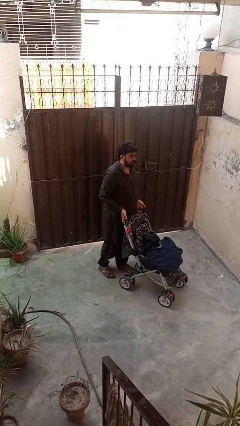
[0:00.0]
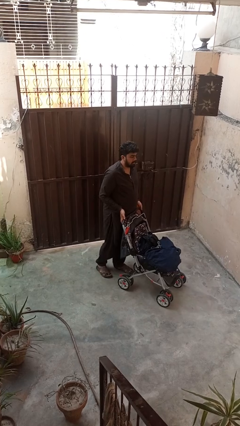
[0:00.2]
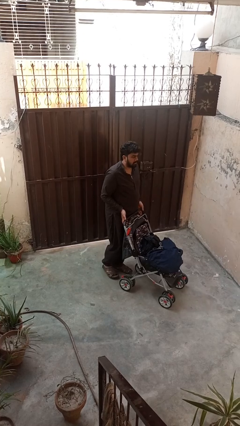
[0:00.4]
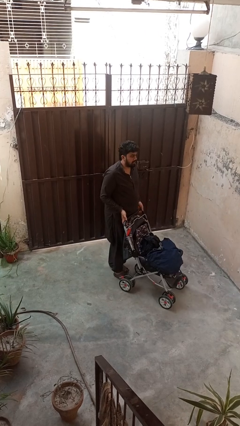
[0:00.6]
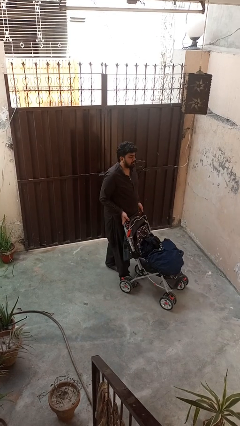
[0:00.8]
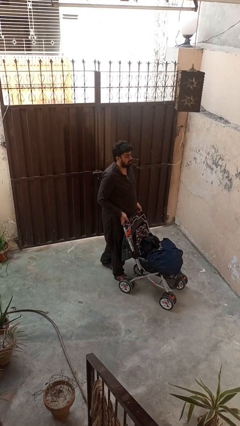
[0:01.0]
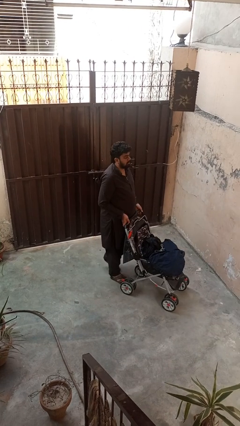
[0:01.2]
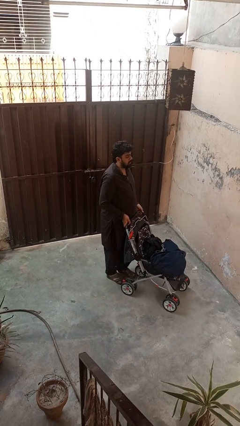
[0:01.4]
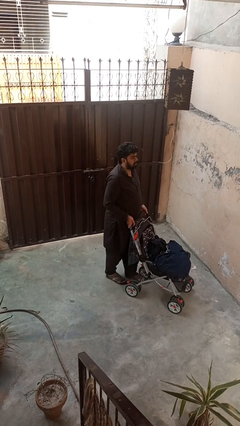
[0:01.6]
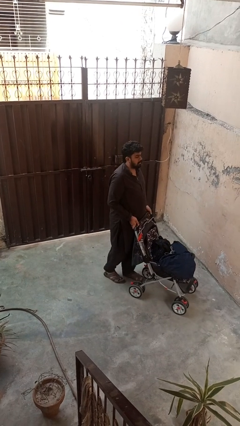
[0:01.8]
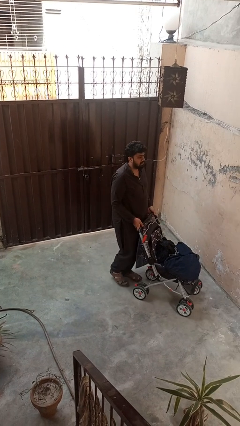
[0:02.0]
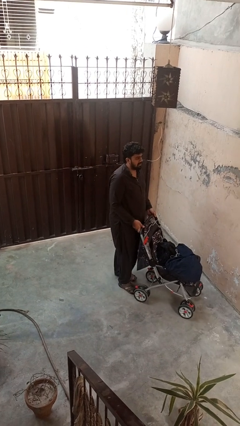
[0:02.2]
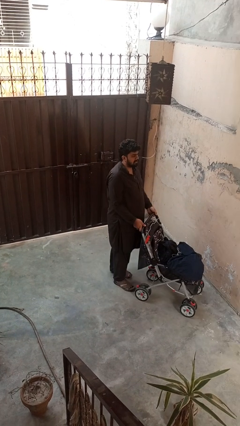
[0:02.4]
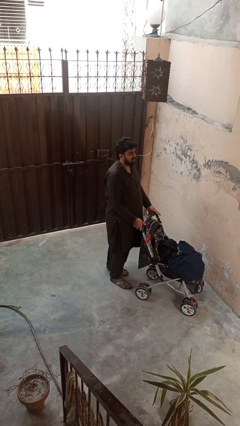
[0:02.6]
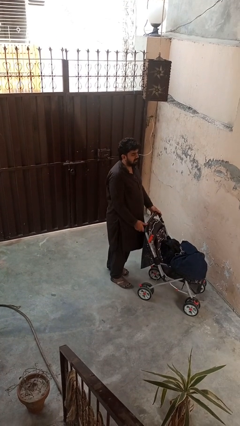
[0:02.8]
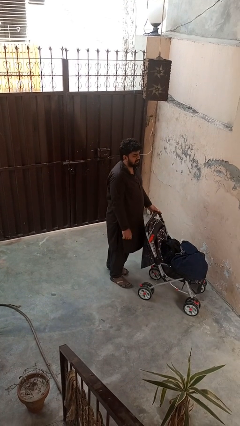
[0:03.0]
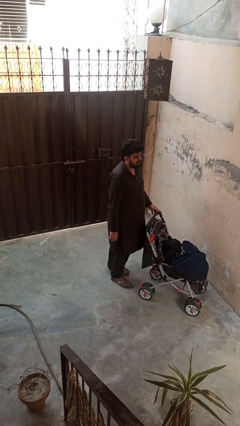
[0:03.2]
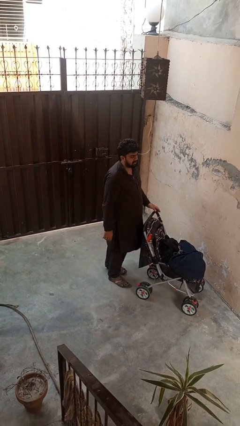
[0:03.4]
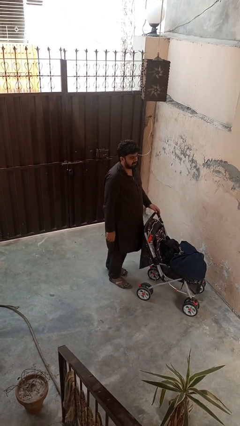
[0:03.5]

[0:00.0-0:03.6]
person pushes wheeled cart

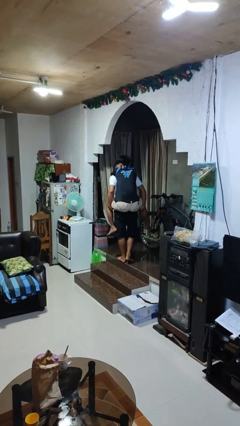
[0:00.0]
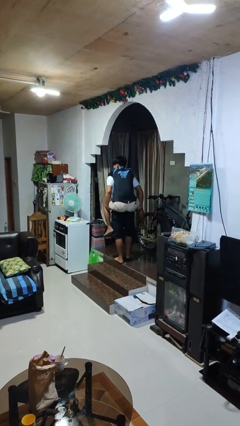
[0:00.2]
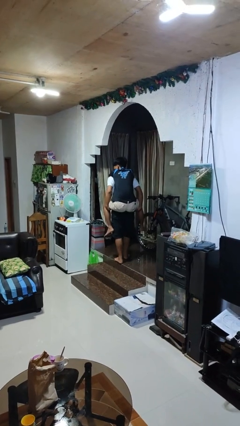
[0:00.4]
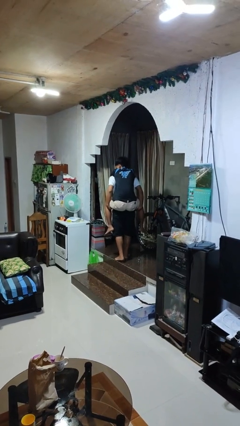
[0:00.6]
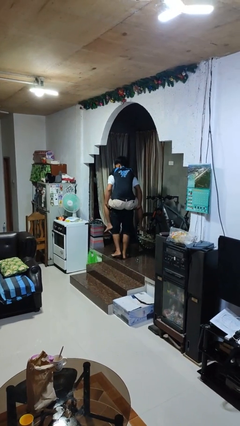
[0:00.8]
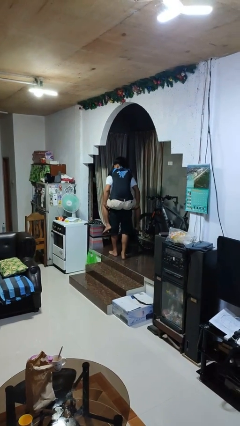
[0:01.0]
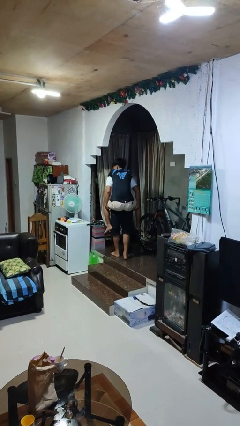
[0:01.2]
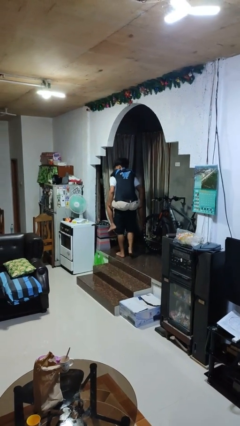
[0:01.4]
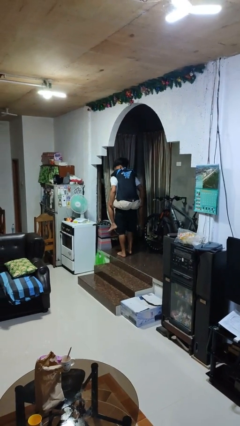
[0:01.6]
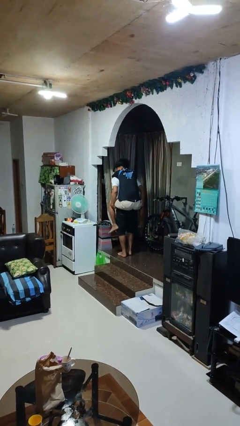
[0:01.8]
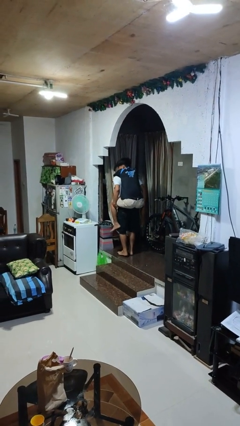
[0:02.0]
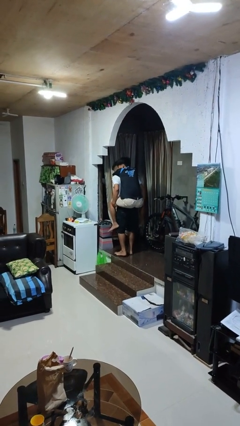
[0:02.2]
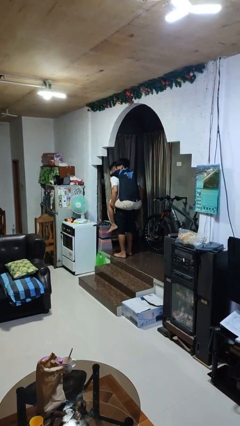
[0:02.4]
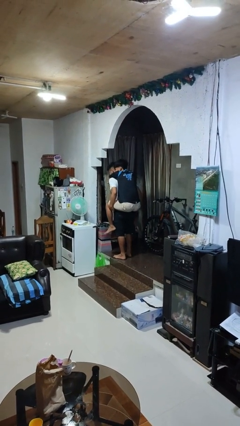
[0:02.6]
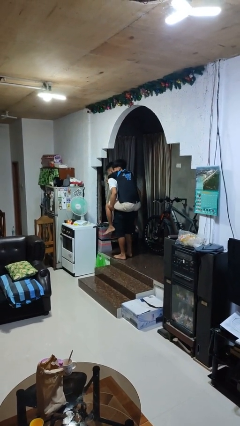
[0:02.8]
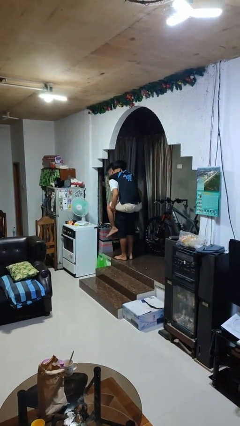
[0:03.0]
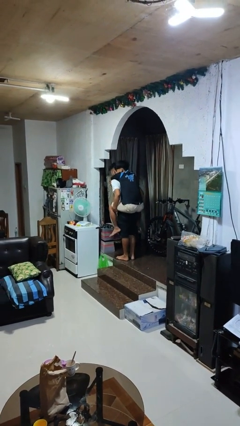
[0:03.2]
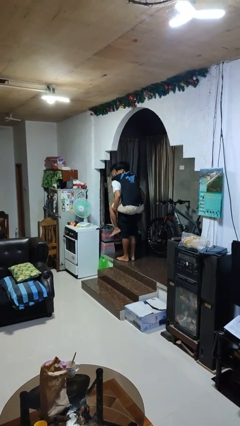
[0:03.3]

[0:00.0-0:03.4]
person carries person on back

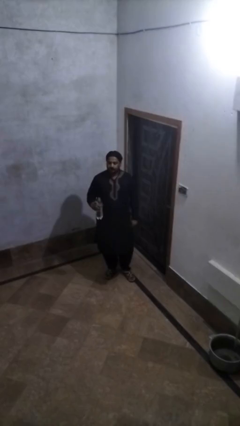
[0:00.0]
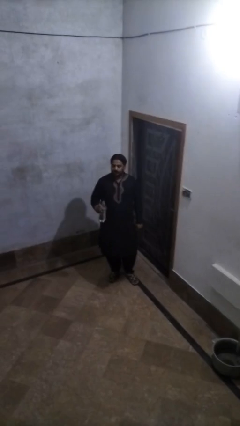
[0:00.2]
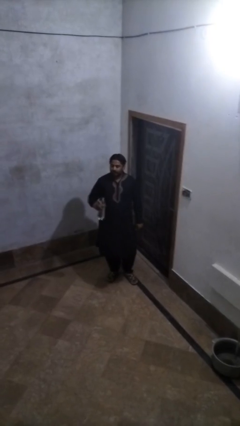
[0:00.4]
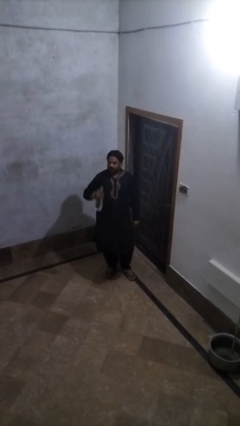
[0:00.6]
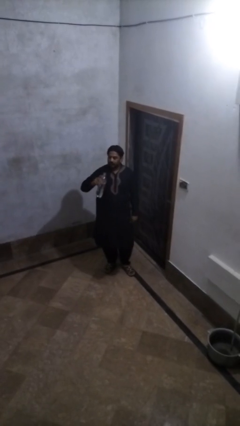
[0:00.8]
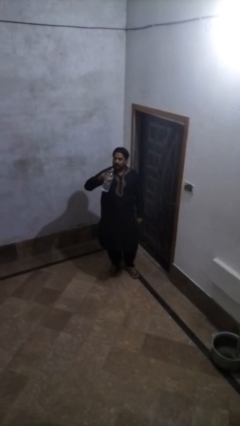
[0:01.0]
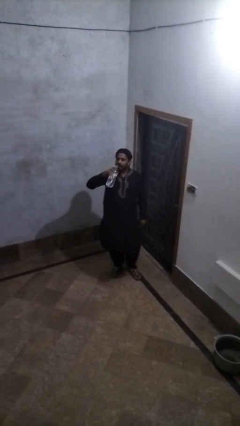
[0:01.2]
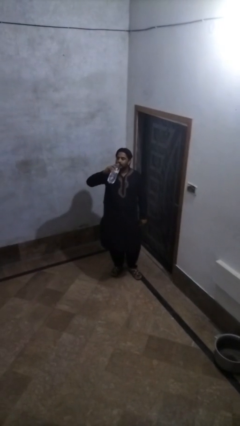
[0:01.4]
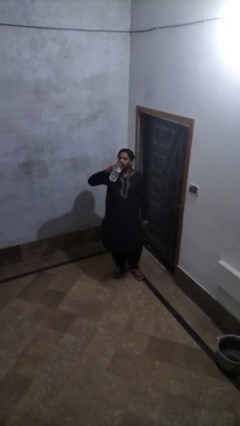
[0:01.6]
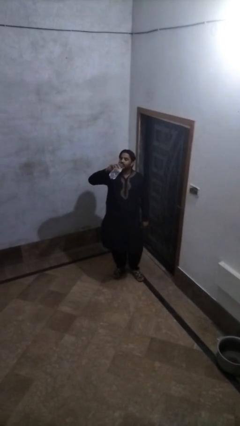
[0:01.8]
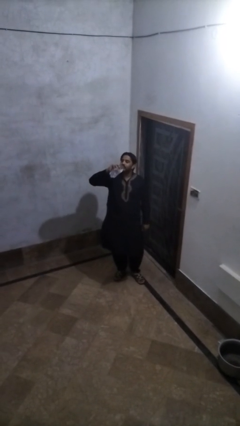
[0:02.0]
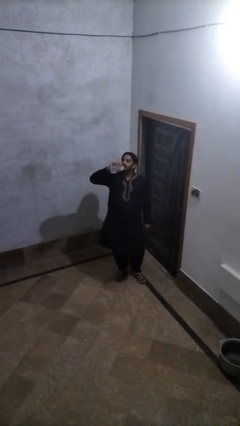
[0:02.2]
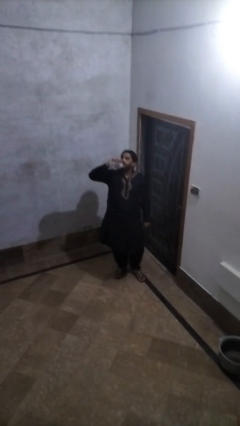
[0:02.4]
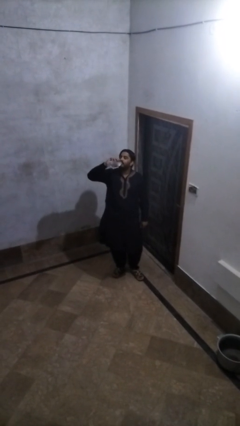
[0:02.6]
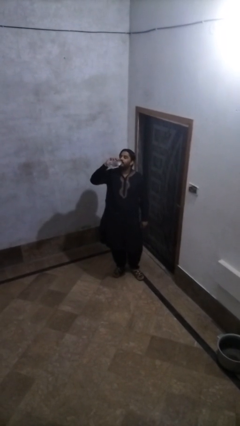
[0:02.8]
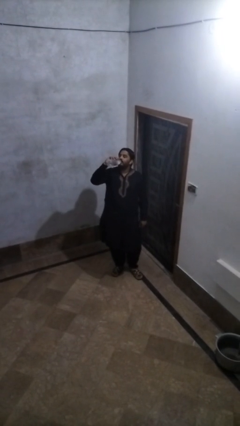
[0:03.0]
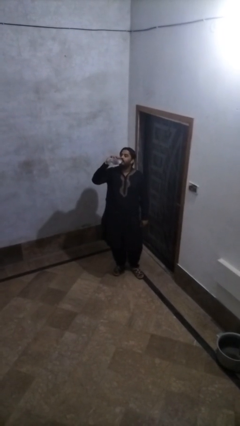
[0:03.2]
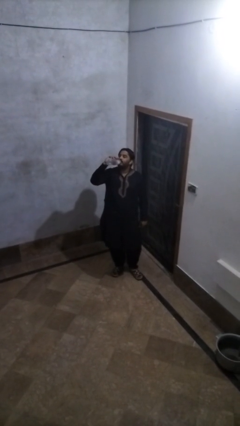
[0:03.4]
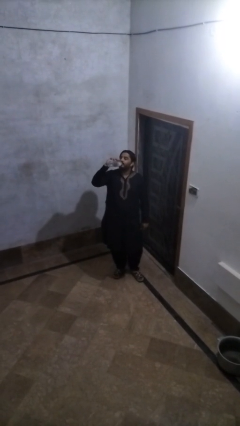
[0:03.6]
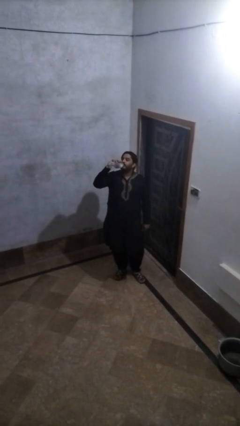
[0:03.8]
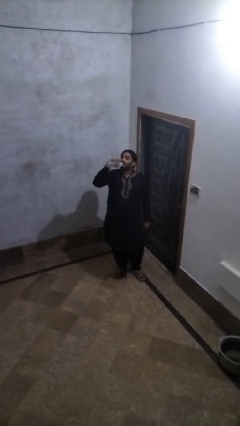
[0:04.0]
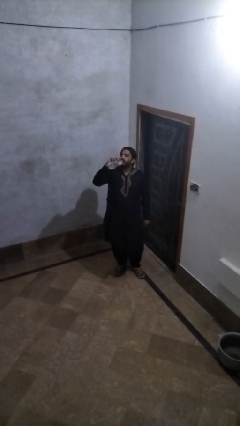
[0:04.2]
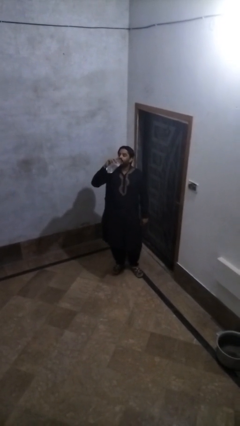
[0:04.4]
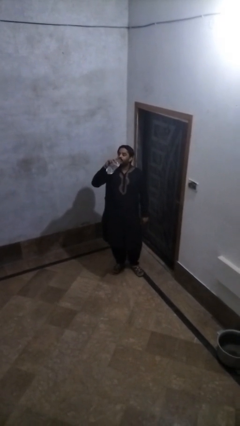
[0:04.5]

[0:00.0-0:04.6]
person drinks from bottle

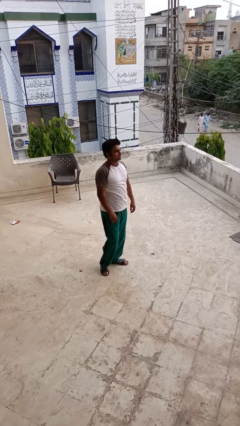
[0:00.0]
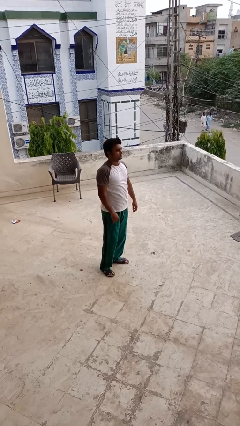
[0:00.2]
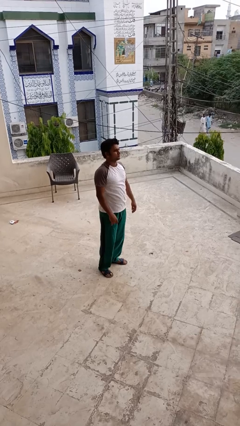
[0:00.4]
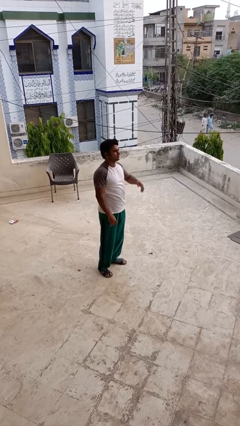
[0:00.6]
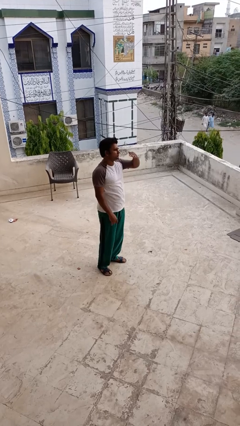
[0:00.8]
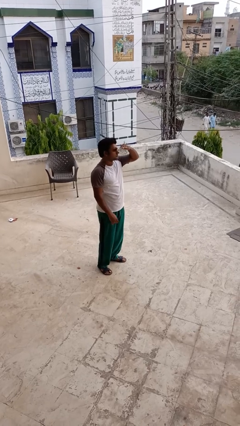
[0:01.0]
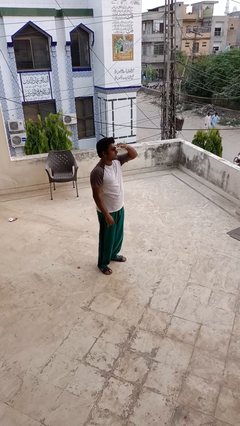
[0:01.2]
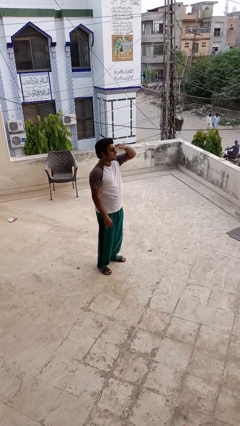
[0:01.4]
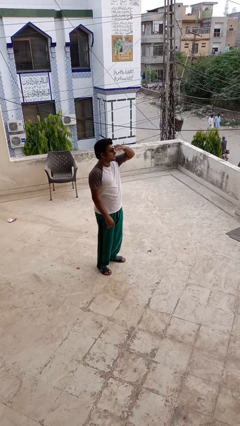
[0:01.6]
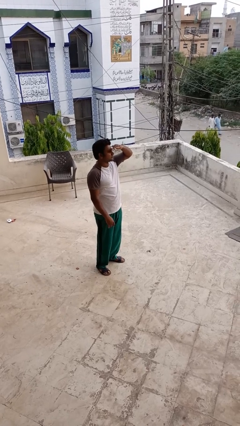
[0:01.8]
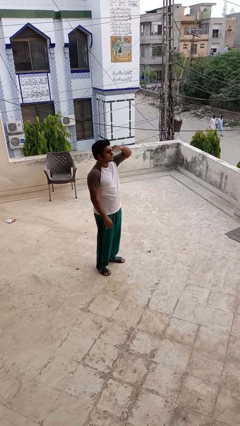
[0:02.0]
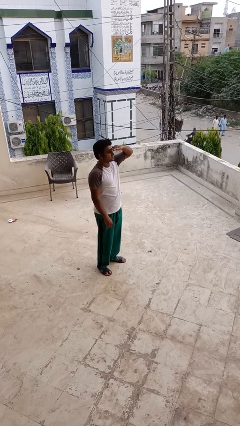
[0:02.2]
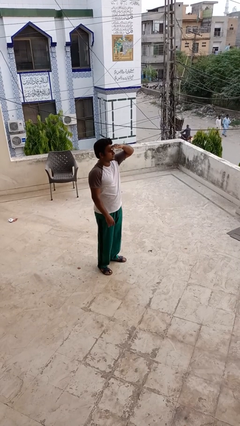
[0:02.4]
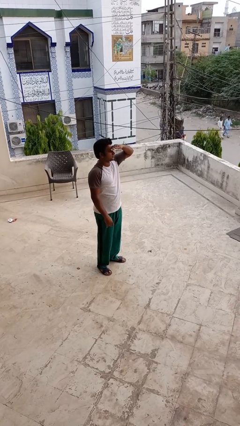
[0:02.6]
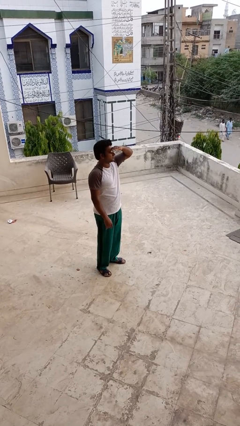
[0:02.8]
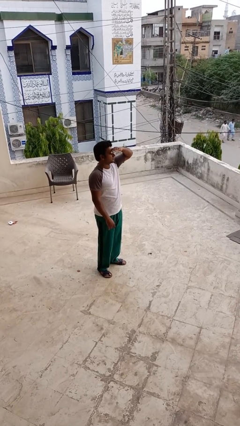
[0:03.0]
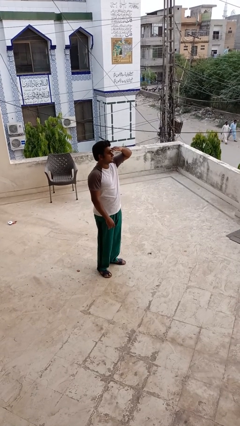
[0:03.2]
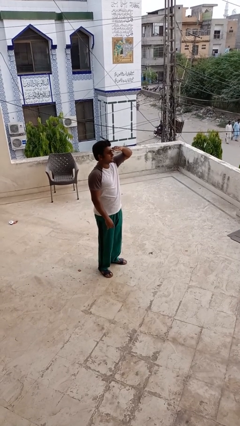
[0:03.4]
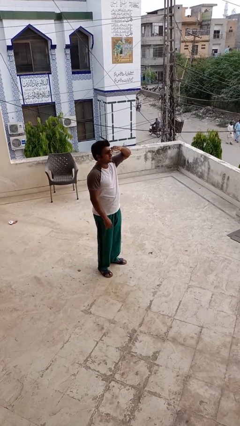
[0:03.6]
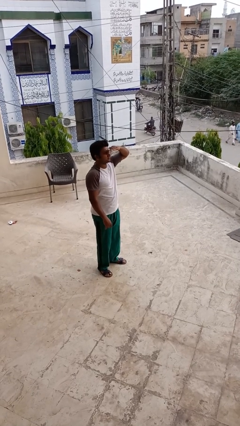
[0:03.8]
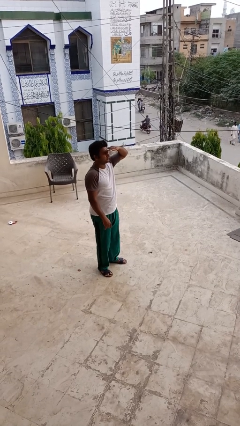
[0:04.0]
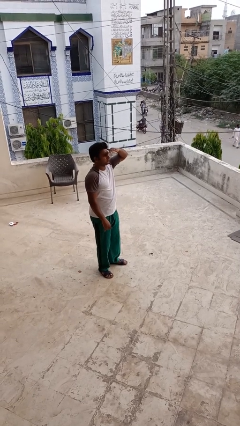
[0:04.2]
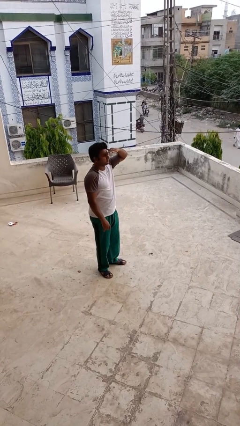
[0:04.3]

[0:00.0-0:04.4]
person shades eyes

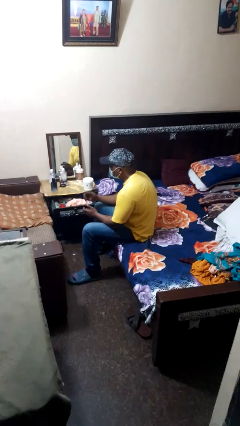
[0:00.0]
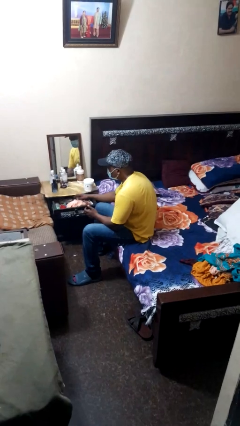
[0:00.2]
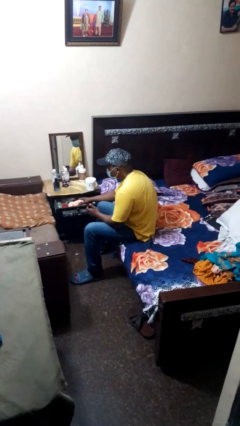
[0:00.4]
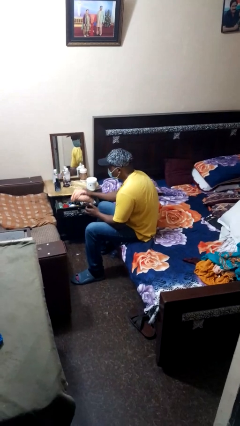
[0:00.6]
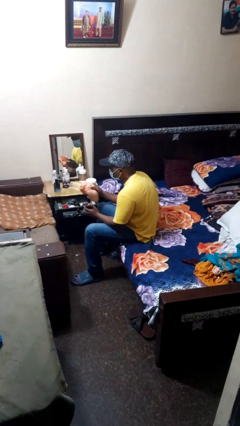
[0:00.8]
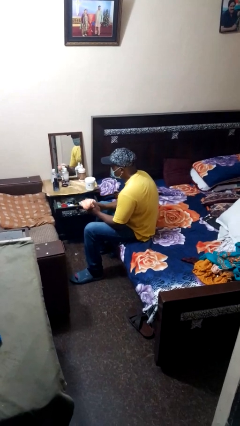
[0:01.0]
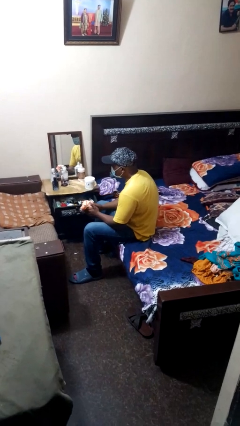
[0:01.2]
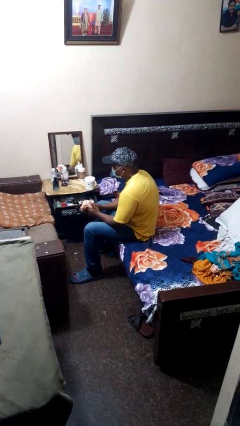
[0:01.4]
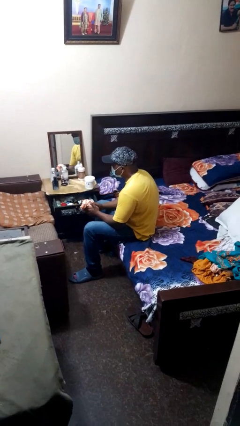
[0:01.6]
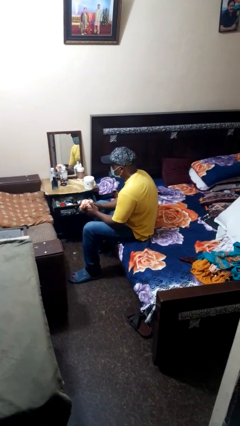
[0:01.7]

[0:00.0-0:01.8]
person takes clothes from dresser
